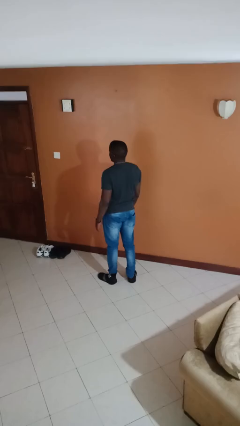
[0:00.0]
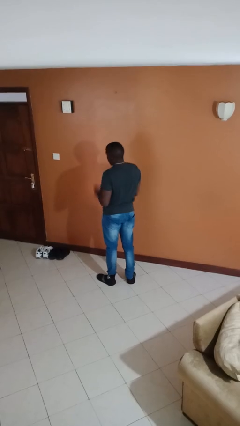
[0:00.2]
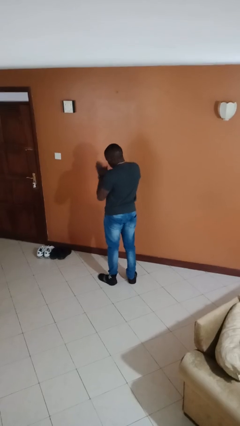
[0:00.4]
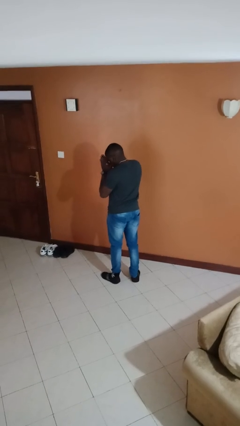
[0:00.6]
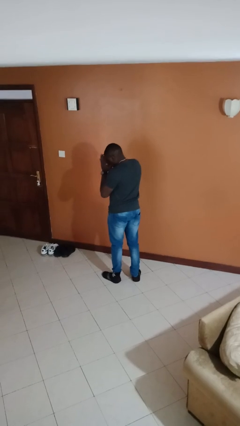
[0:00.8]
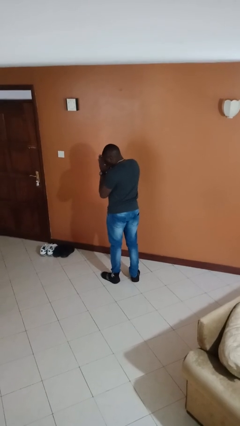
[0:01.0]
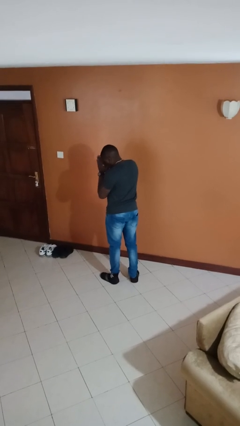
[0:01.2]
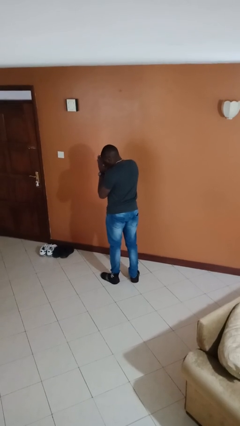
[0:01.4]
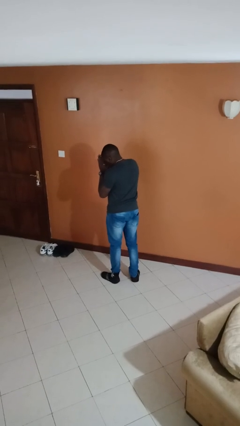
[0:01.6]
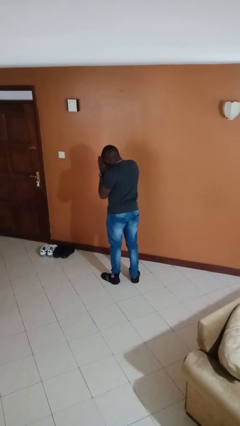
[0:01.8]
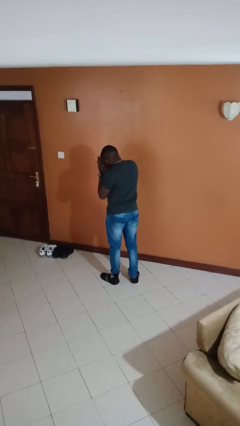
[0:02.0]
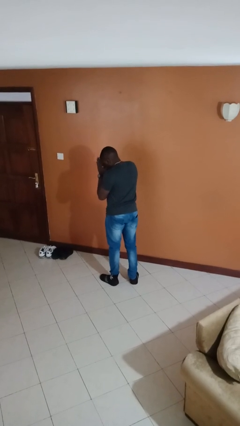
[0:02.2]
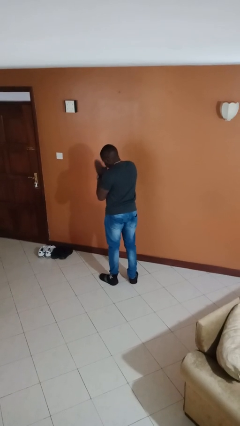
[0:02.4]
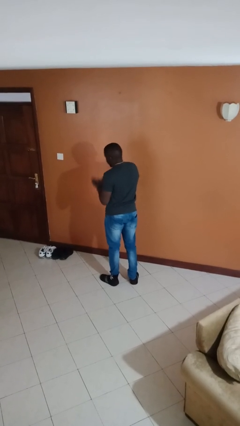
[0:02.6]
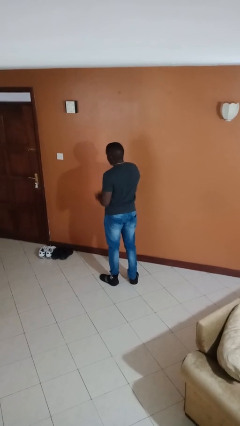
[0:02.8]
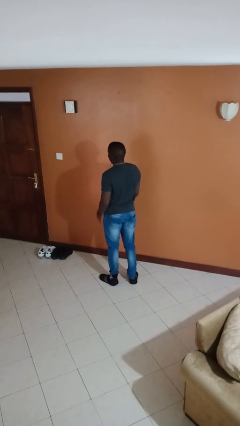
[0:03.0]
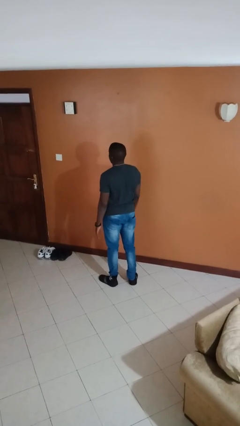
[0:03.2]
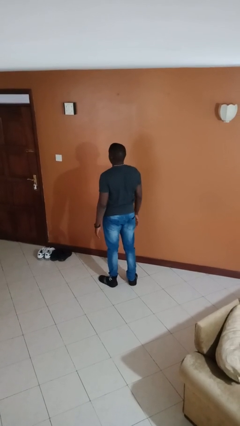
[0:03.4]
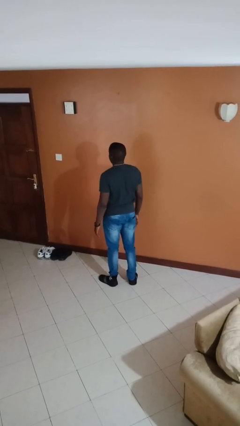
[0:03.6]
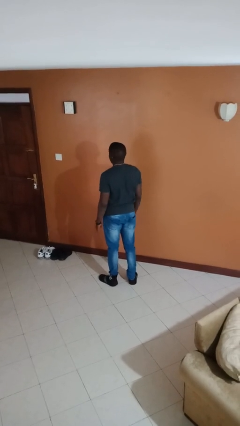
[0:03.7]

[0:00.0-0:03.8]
person prays

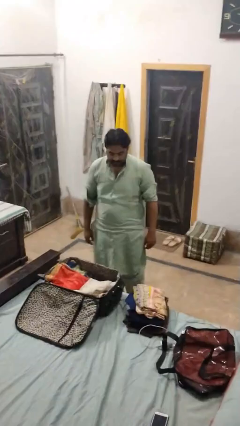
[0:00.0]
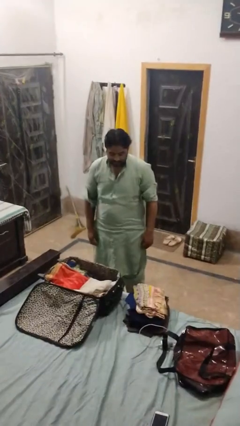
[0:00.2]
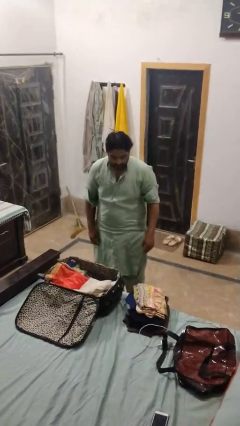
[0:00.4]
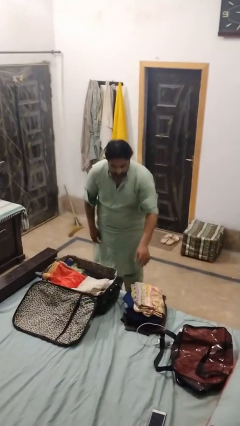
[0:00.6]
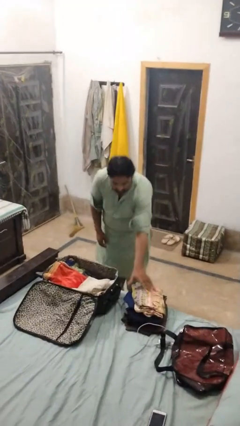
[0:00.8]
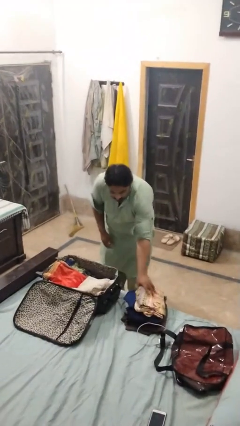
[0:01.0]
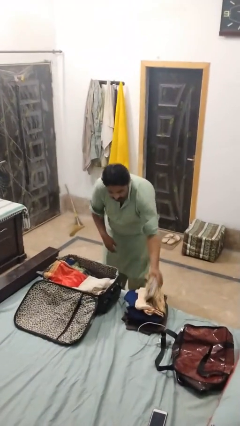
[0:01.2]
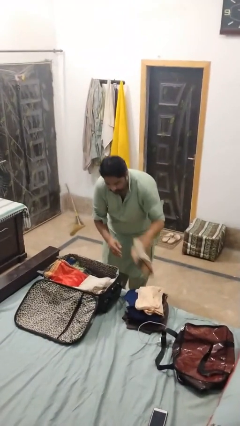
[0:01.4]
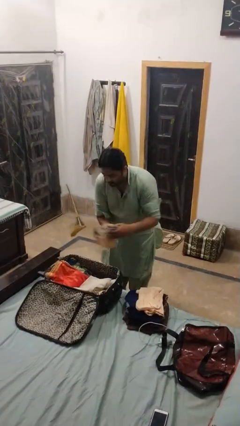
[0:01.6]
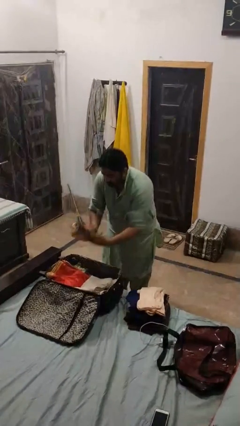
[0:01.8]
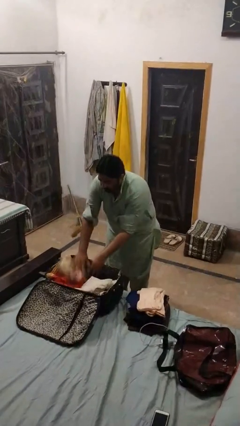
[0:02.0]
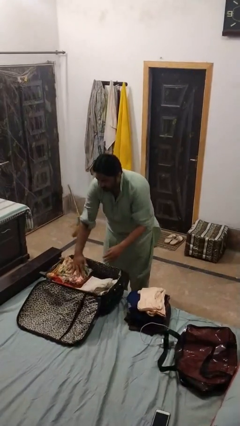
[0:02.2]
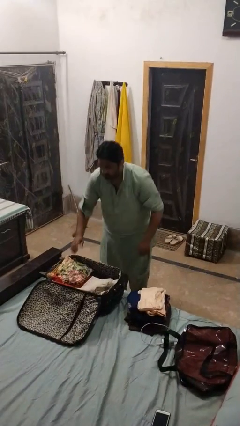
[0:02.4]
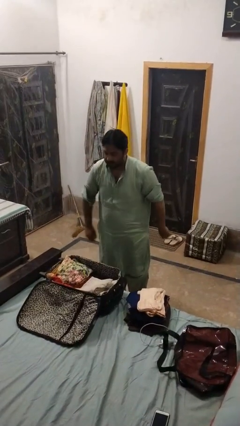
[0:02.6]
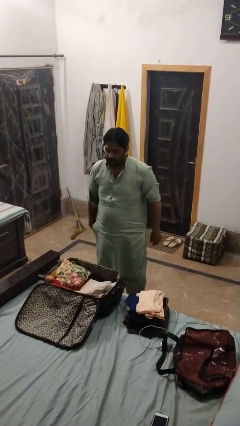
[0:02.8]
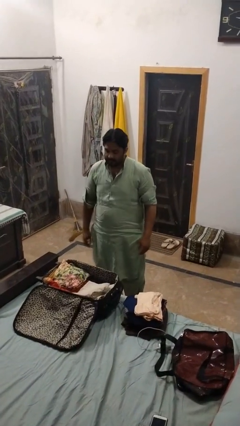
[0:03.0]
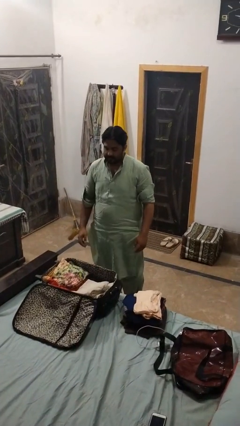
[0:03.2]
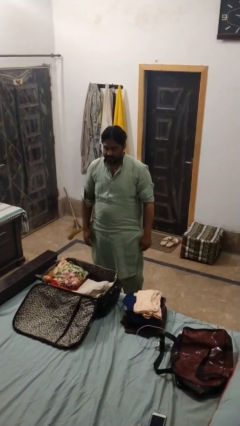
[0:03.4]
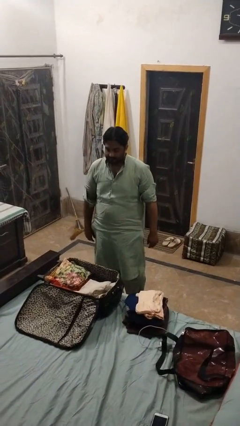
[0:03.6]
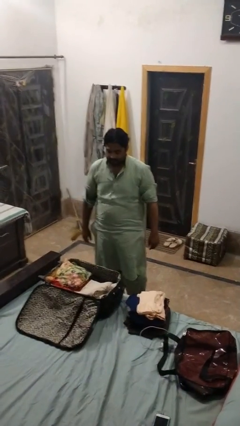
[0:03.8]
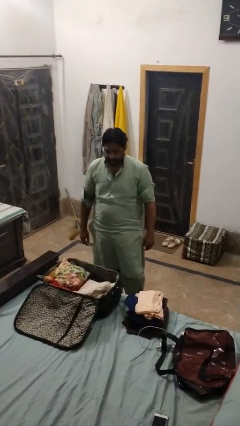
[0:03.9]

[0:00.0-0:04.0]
person loads clothes into suitcase

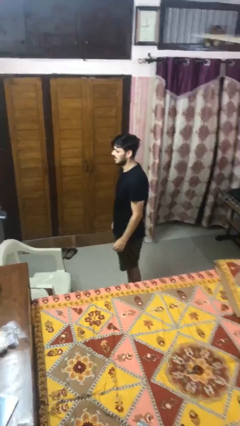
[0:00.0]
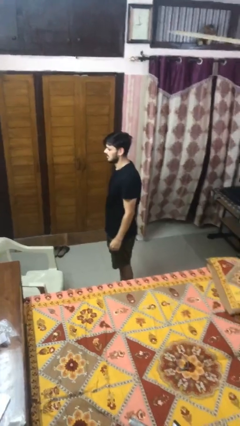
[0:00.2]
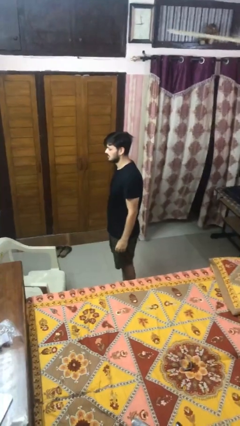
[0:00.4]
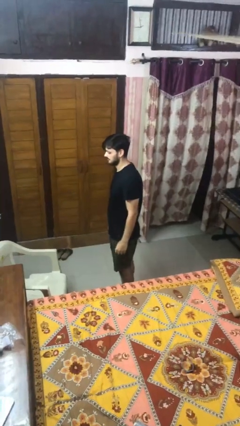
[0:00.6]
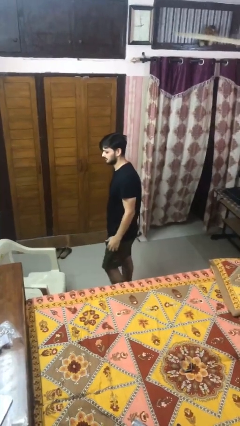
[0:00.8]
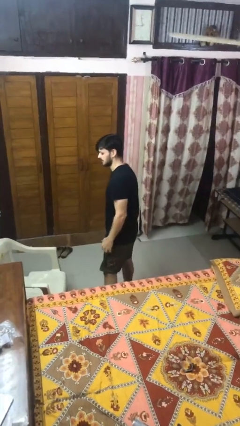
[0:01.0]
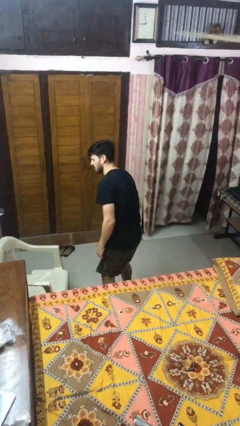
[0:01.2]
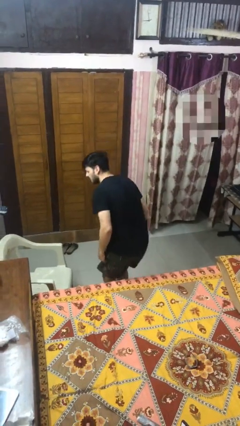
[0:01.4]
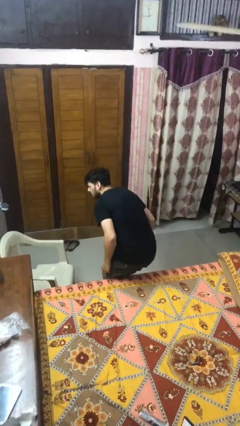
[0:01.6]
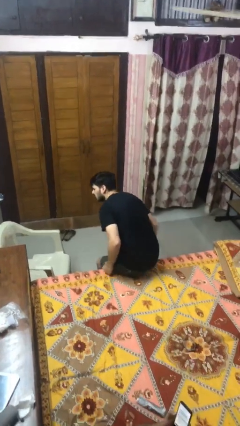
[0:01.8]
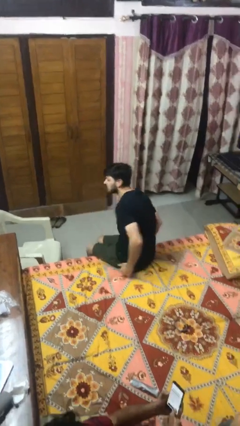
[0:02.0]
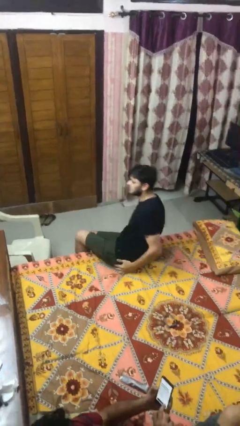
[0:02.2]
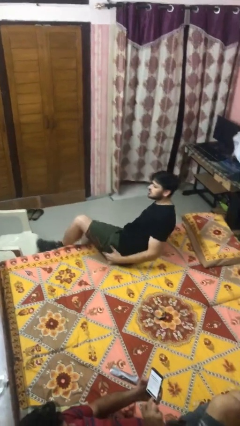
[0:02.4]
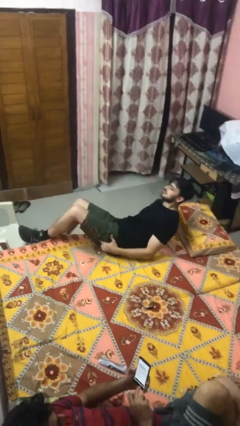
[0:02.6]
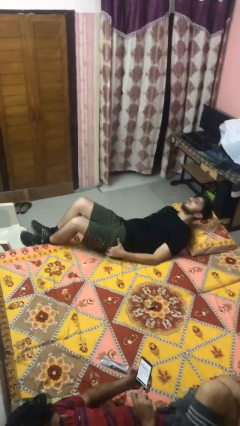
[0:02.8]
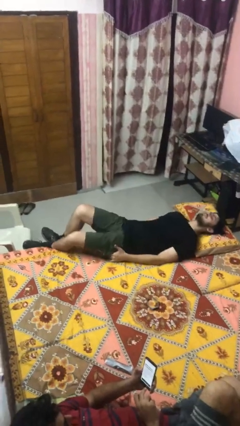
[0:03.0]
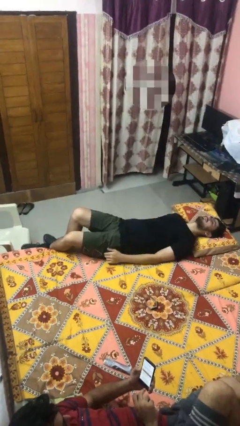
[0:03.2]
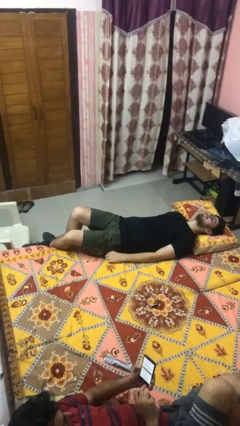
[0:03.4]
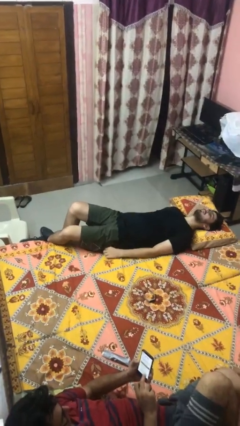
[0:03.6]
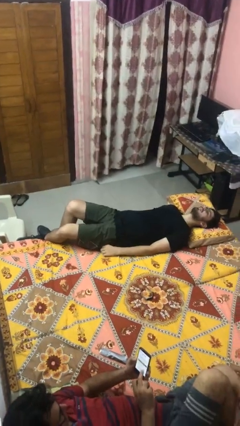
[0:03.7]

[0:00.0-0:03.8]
person lies down on bed

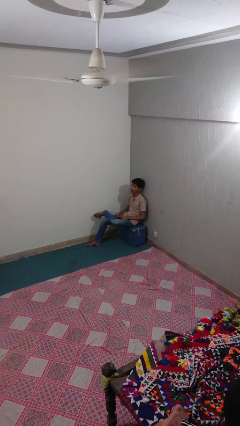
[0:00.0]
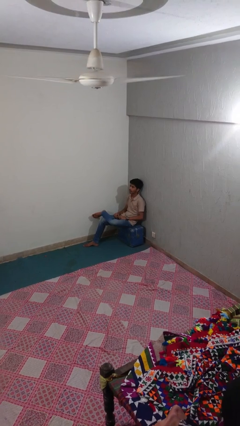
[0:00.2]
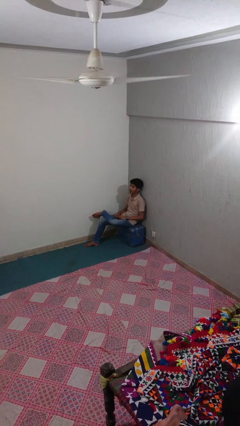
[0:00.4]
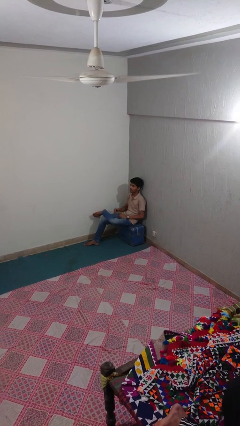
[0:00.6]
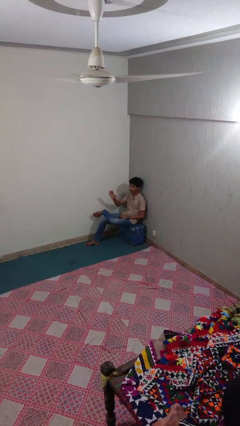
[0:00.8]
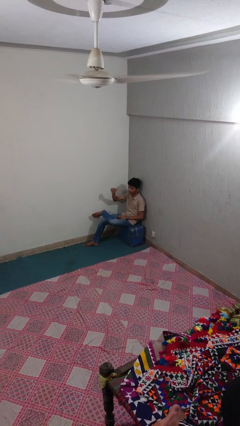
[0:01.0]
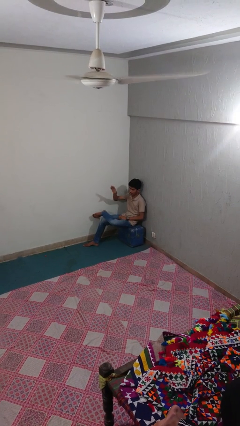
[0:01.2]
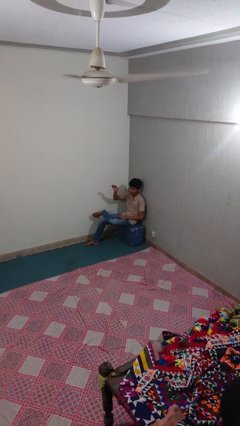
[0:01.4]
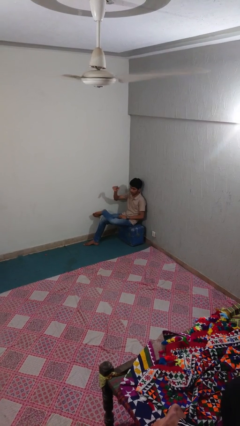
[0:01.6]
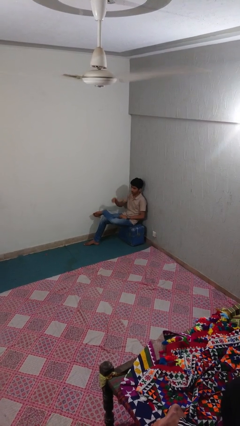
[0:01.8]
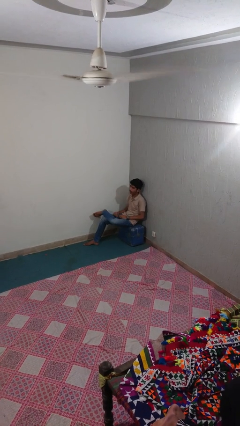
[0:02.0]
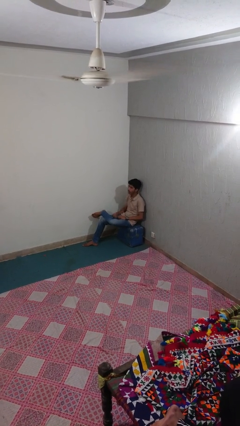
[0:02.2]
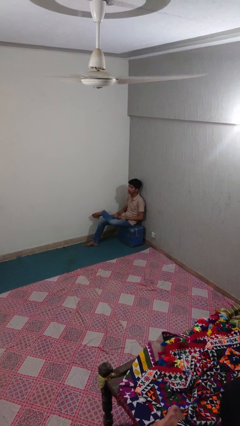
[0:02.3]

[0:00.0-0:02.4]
person gestures come here

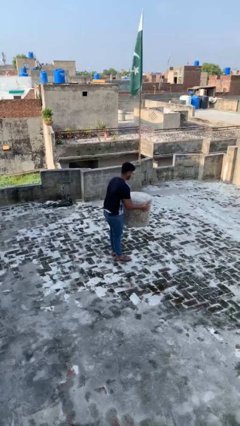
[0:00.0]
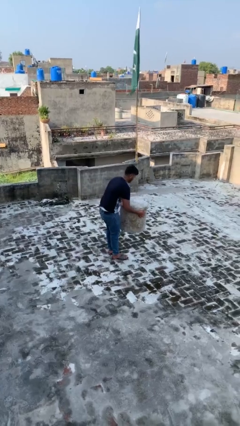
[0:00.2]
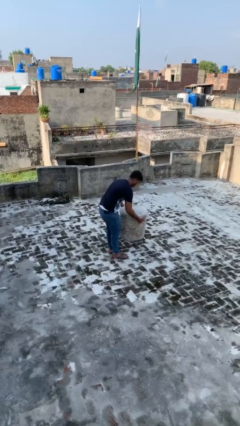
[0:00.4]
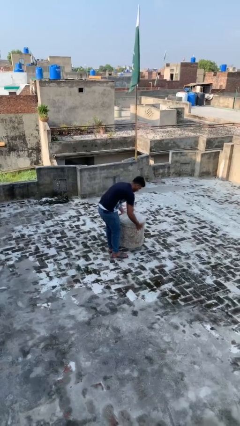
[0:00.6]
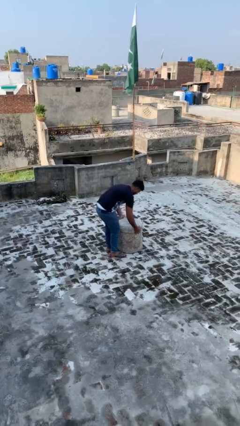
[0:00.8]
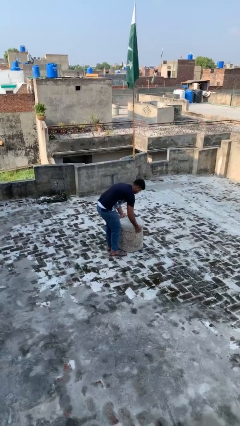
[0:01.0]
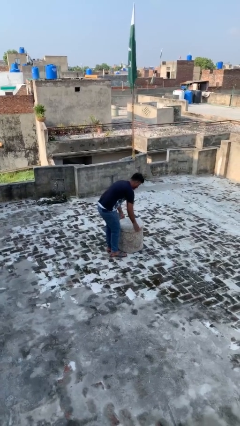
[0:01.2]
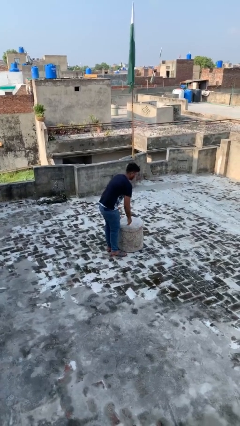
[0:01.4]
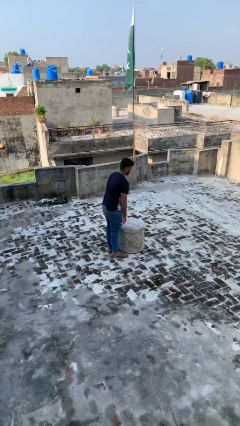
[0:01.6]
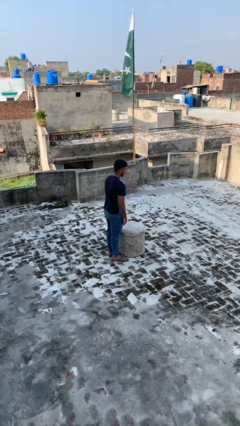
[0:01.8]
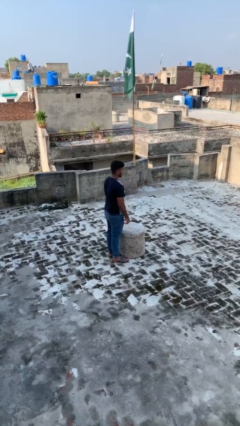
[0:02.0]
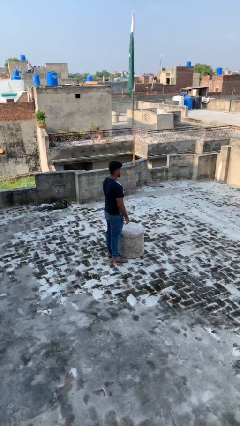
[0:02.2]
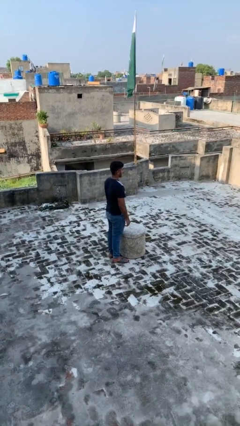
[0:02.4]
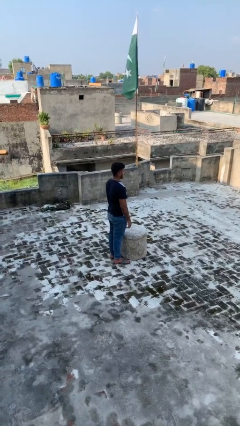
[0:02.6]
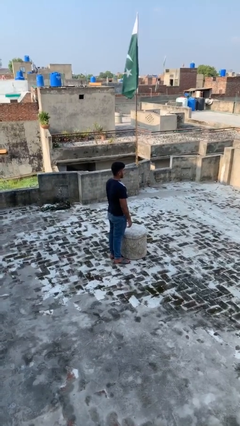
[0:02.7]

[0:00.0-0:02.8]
person puts down object on floor

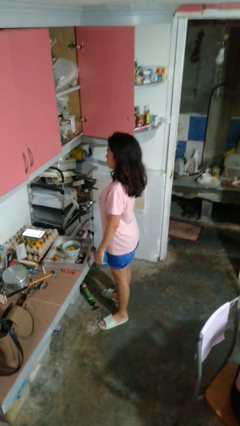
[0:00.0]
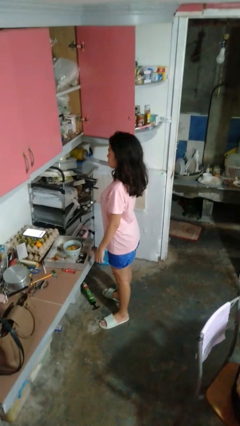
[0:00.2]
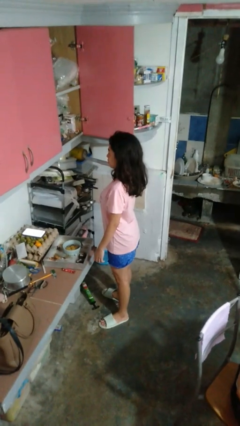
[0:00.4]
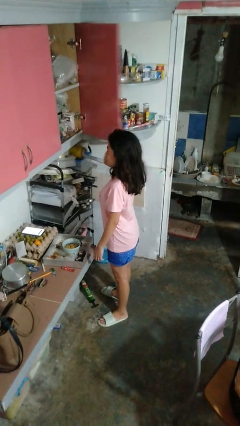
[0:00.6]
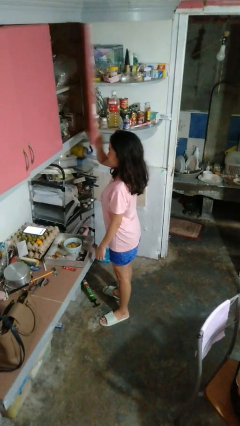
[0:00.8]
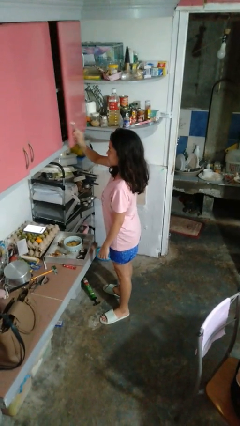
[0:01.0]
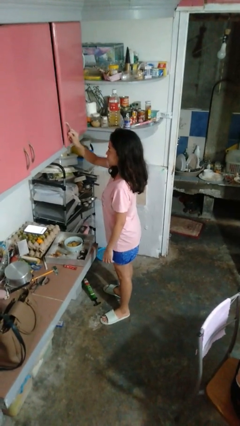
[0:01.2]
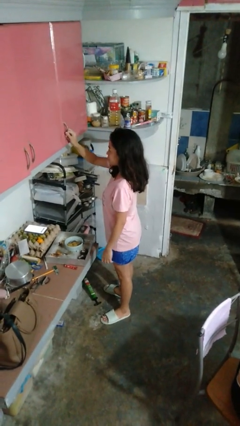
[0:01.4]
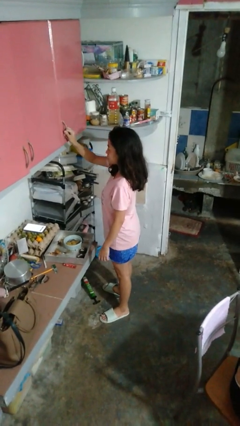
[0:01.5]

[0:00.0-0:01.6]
person closes cabinet
